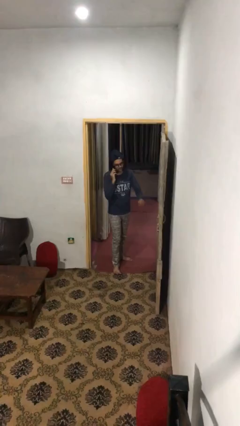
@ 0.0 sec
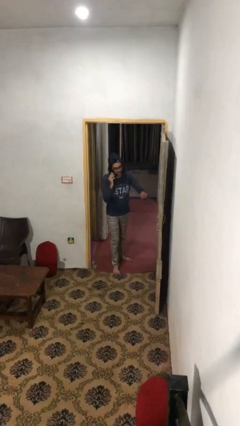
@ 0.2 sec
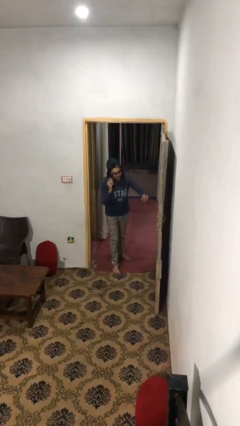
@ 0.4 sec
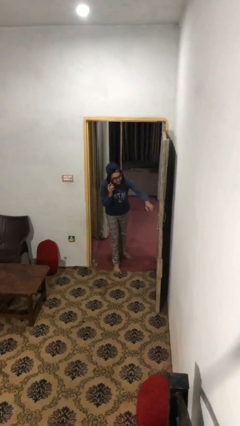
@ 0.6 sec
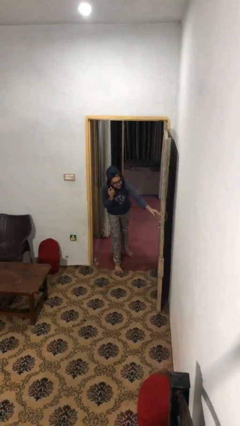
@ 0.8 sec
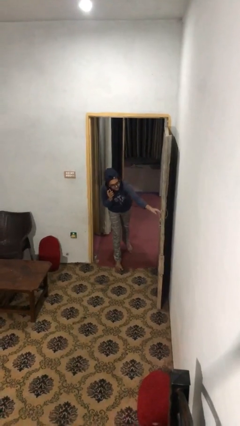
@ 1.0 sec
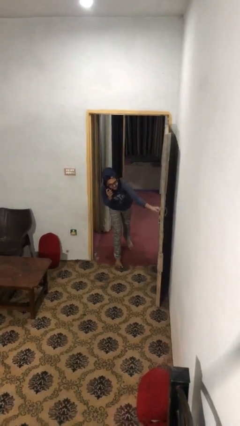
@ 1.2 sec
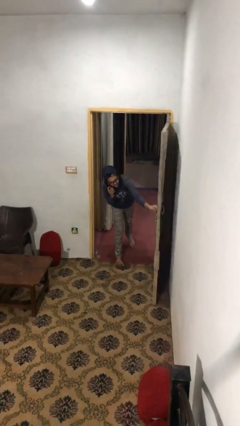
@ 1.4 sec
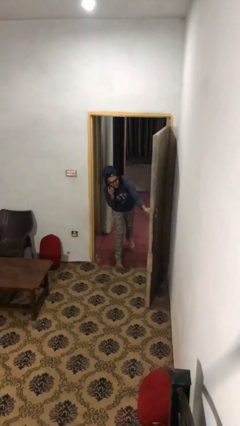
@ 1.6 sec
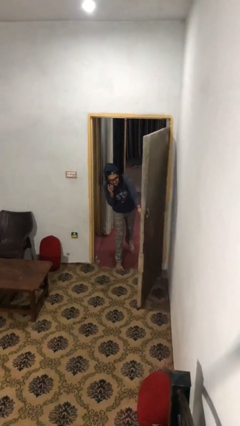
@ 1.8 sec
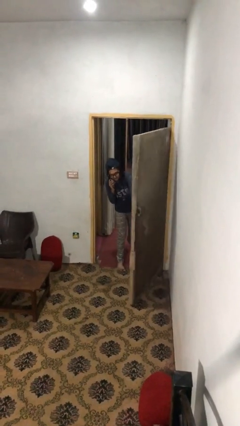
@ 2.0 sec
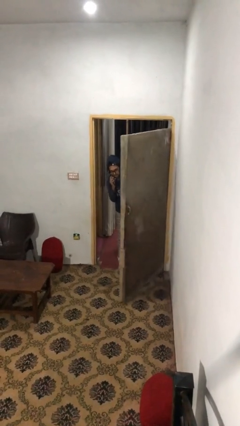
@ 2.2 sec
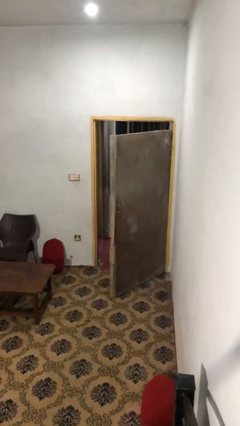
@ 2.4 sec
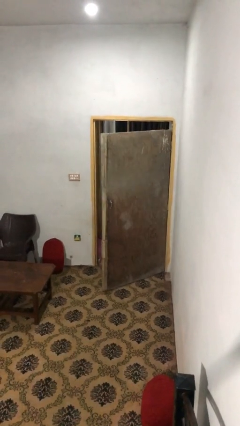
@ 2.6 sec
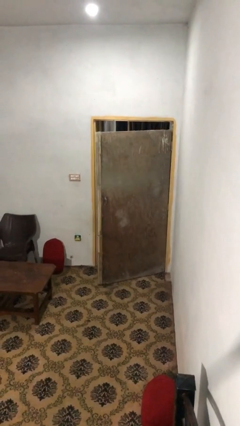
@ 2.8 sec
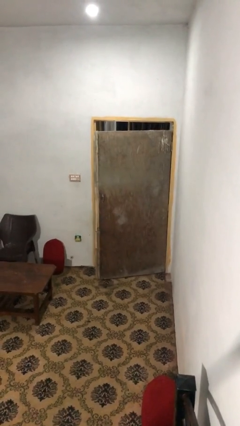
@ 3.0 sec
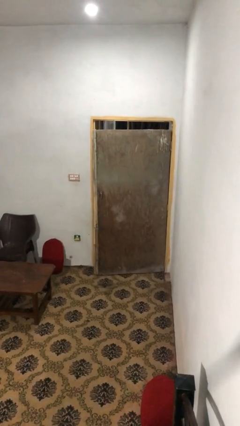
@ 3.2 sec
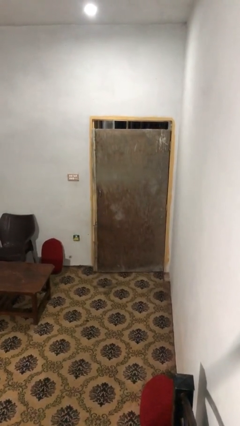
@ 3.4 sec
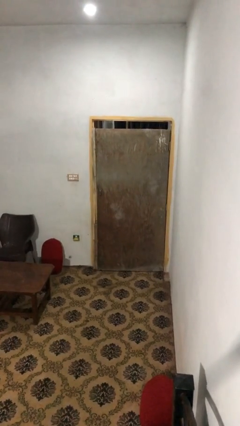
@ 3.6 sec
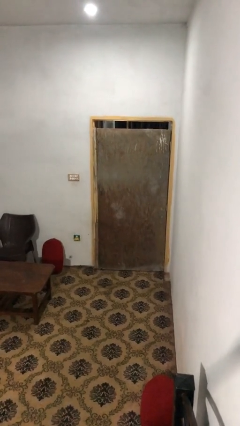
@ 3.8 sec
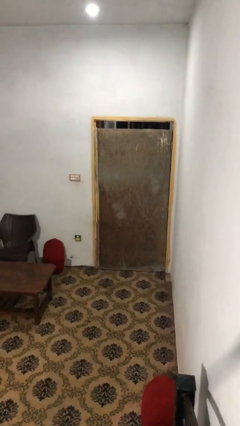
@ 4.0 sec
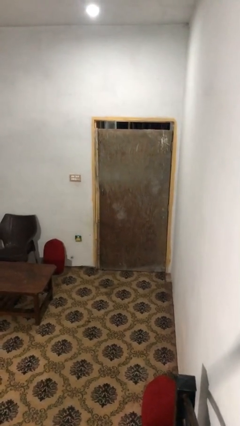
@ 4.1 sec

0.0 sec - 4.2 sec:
person closes facility door

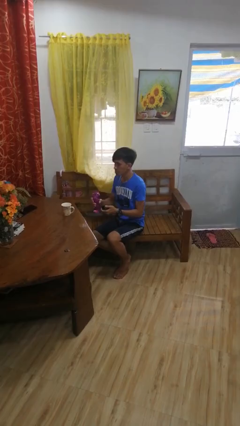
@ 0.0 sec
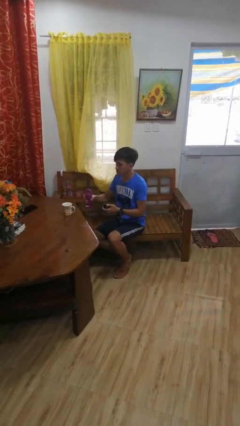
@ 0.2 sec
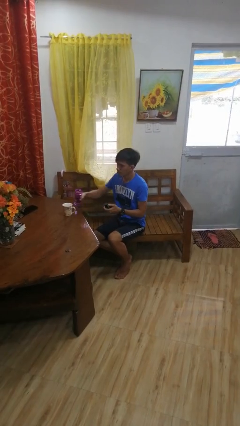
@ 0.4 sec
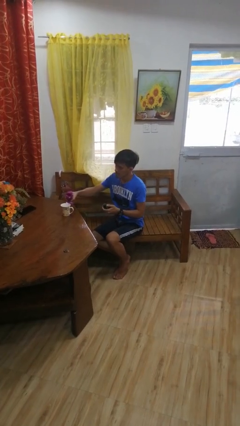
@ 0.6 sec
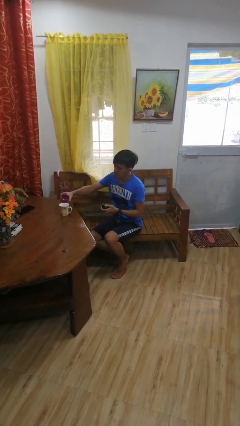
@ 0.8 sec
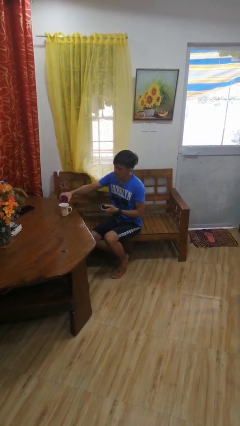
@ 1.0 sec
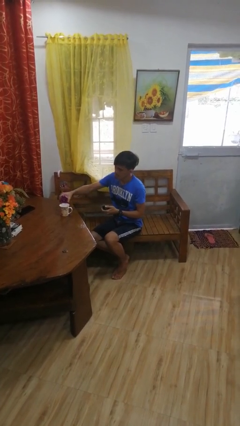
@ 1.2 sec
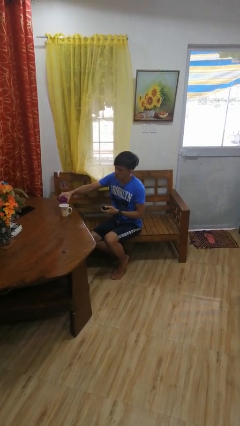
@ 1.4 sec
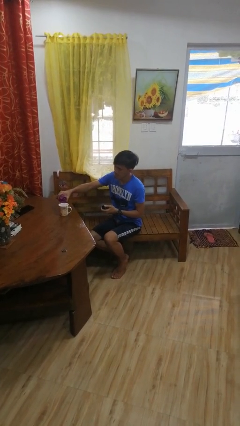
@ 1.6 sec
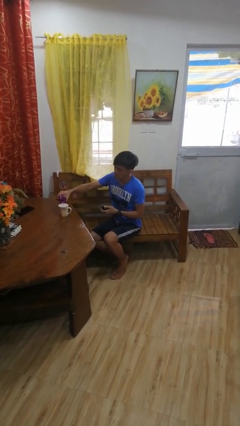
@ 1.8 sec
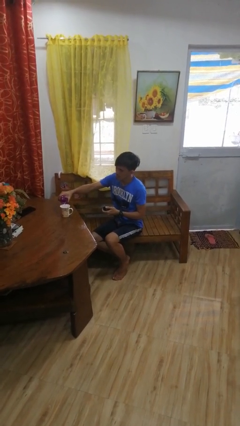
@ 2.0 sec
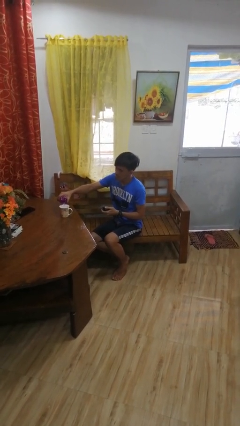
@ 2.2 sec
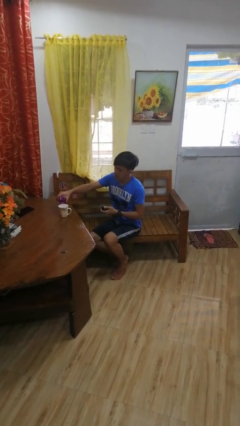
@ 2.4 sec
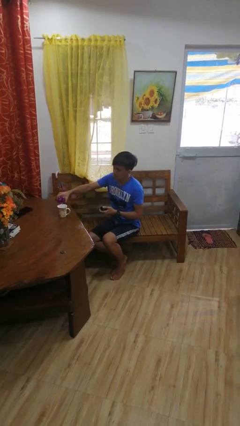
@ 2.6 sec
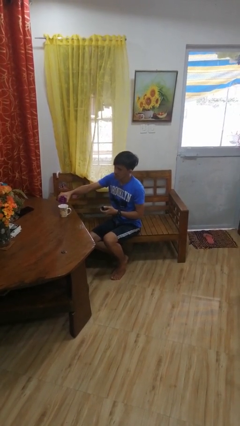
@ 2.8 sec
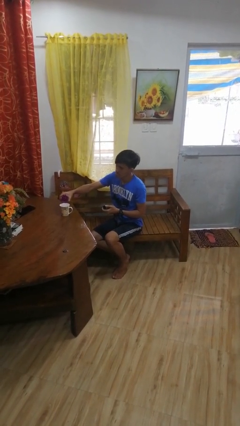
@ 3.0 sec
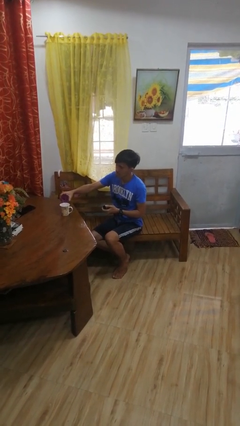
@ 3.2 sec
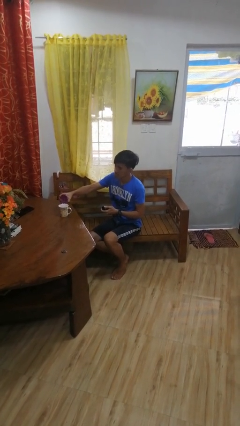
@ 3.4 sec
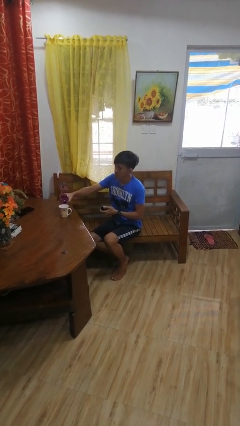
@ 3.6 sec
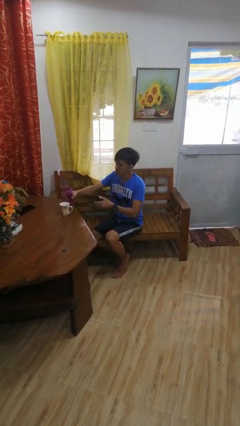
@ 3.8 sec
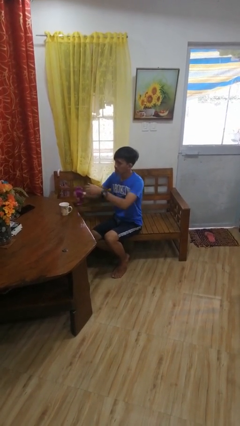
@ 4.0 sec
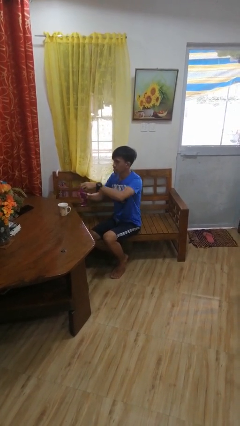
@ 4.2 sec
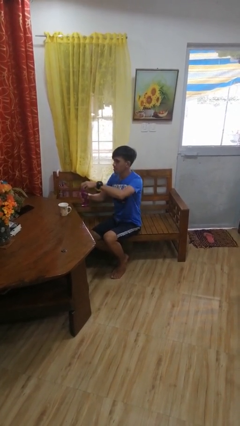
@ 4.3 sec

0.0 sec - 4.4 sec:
person pours liquid into cup

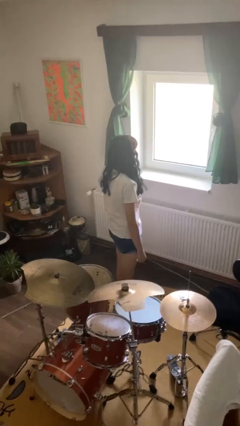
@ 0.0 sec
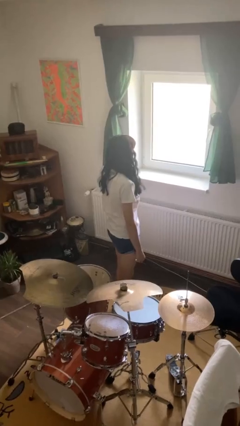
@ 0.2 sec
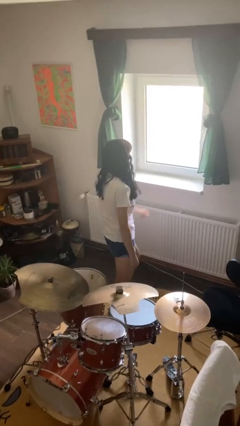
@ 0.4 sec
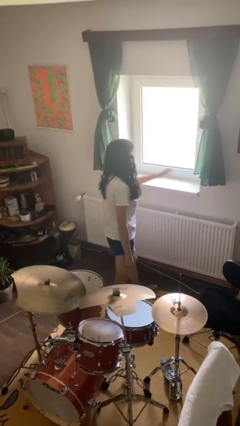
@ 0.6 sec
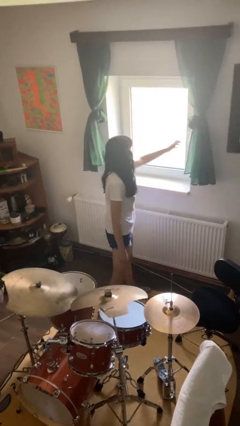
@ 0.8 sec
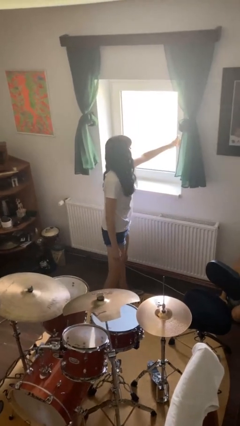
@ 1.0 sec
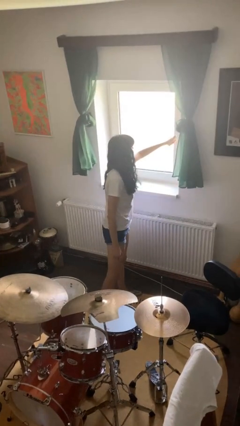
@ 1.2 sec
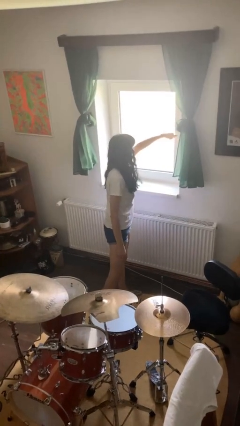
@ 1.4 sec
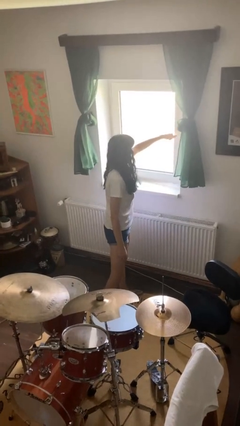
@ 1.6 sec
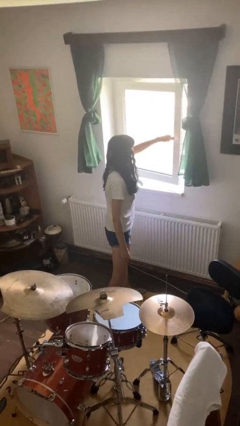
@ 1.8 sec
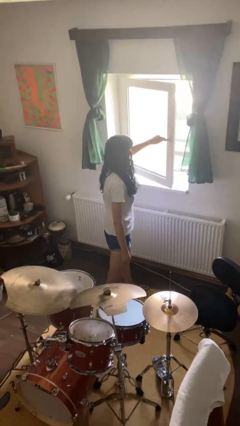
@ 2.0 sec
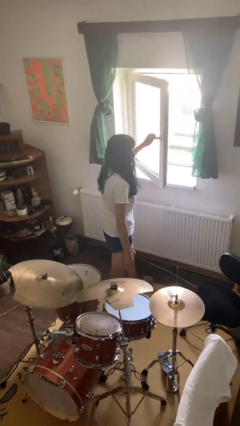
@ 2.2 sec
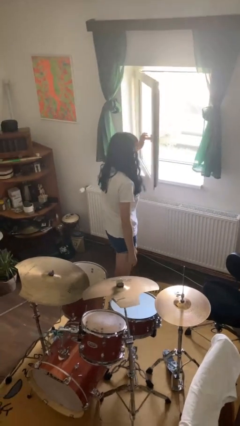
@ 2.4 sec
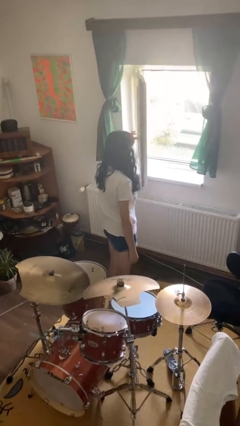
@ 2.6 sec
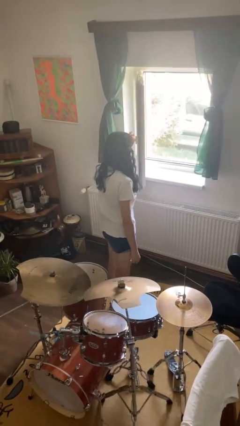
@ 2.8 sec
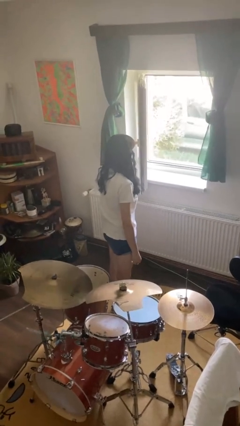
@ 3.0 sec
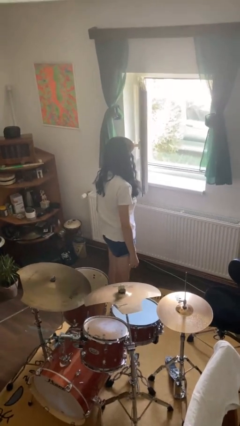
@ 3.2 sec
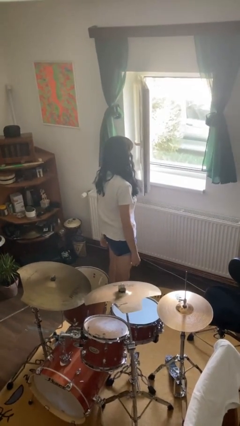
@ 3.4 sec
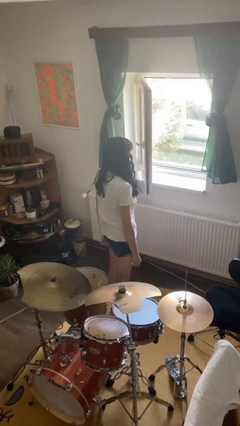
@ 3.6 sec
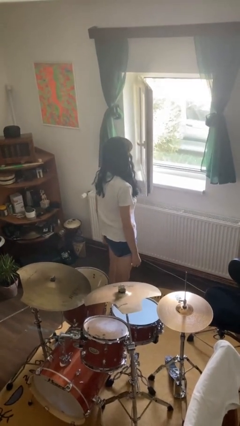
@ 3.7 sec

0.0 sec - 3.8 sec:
person opens home window

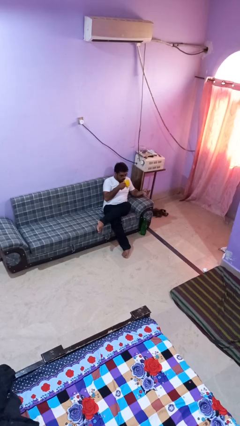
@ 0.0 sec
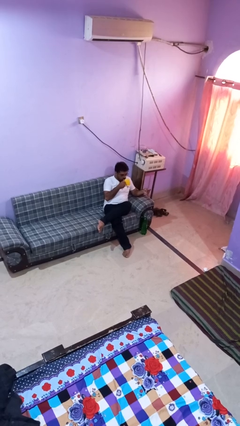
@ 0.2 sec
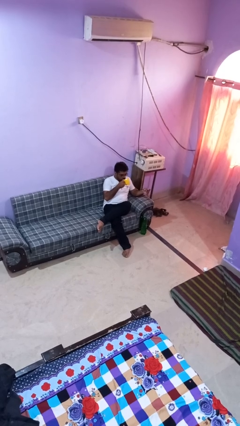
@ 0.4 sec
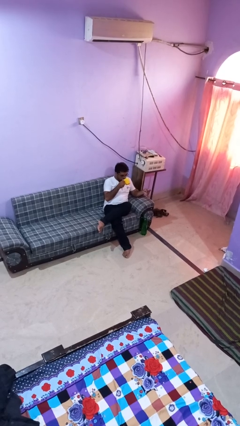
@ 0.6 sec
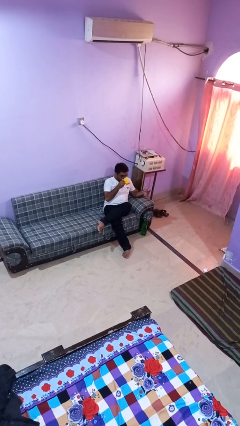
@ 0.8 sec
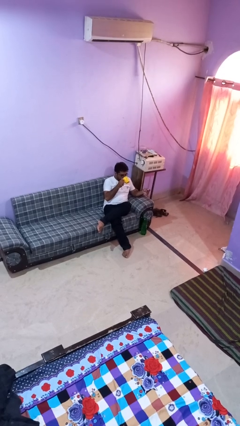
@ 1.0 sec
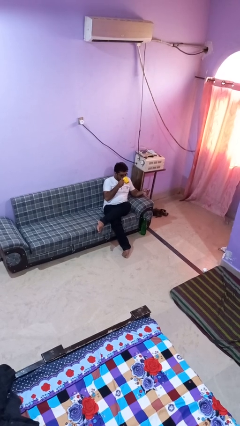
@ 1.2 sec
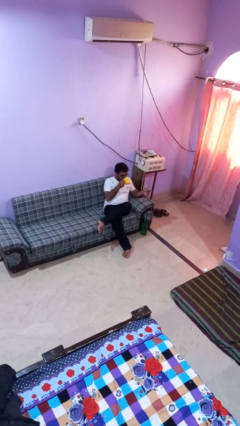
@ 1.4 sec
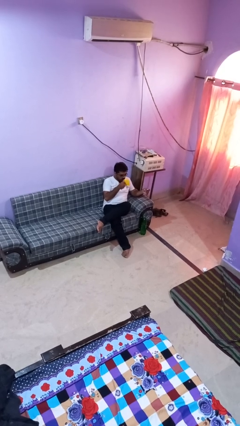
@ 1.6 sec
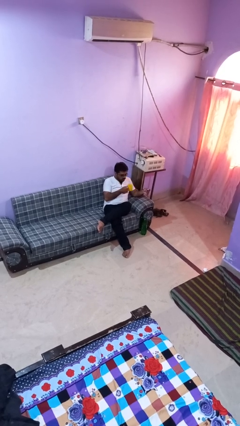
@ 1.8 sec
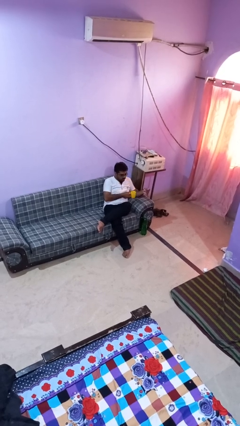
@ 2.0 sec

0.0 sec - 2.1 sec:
person drinks from mug

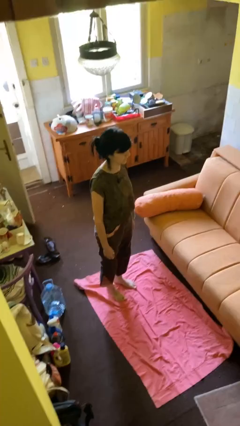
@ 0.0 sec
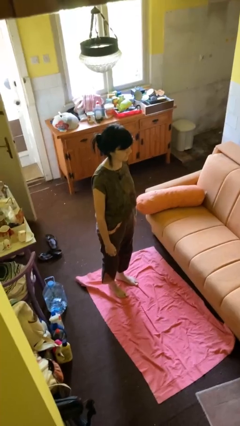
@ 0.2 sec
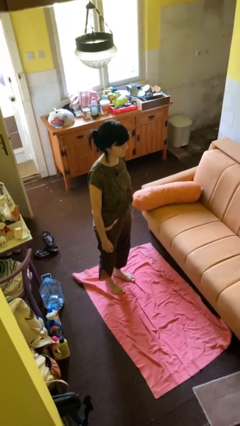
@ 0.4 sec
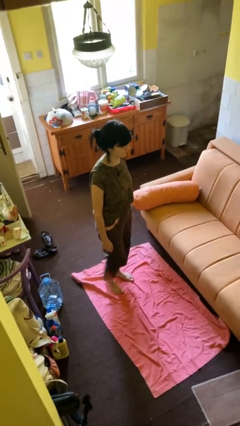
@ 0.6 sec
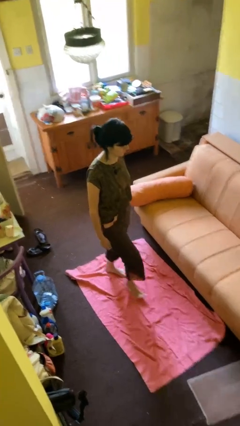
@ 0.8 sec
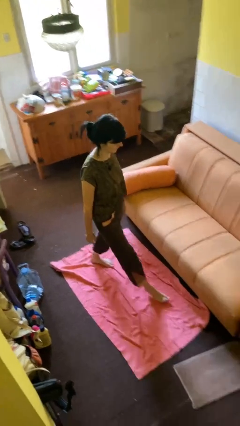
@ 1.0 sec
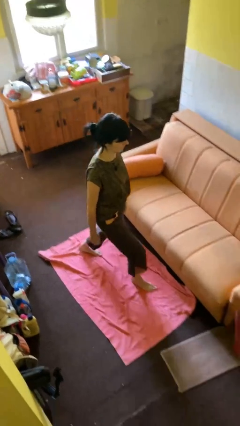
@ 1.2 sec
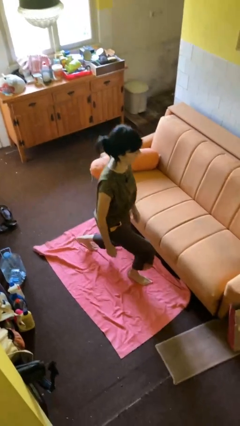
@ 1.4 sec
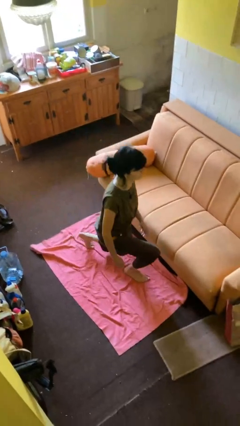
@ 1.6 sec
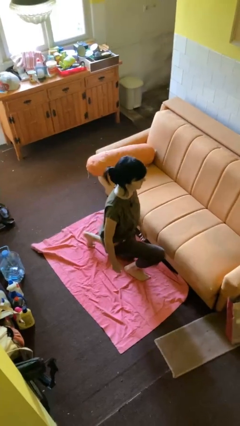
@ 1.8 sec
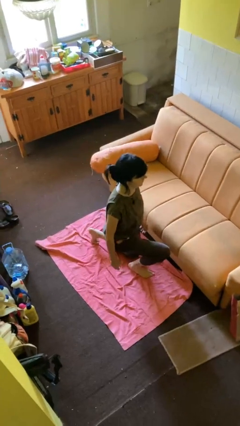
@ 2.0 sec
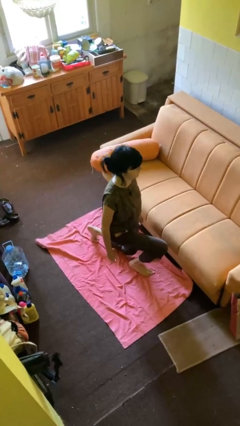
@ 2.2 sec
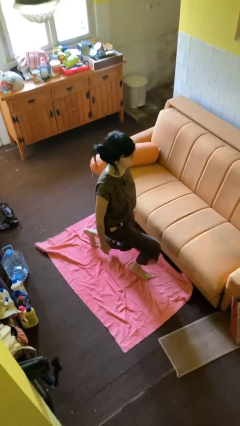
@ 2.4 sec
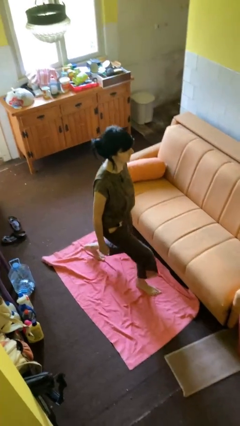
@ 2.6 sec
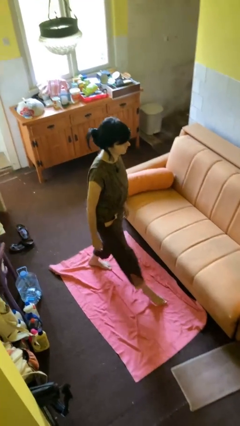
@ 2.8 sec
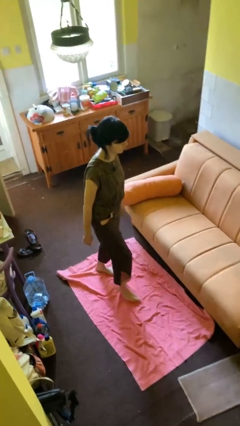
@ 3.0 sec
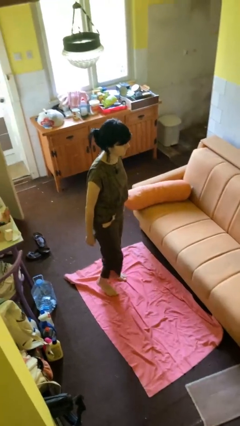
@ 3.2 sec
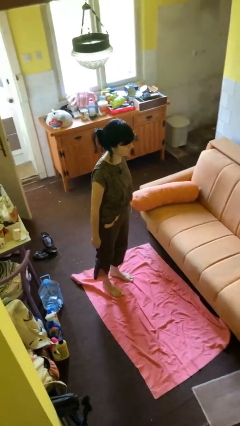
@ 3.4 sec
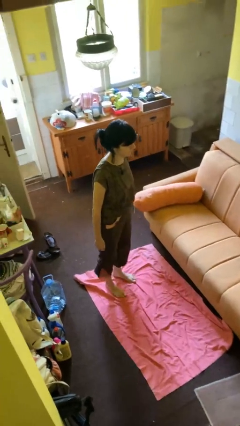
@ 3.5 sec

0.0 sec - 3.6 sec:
person exercises with lunges
